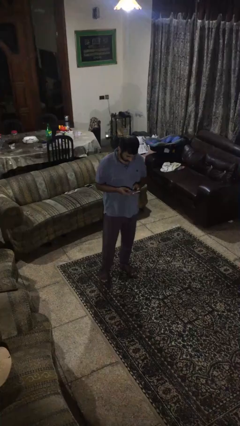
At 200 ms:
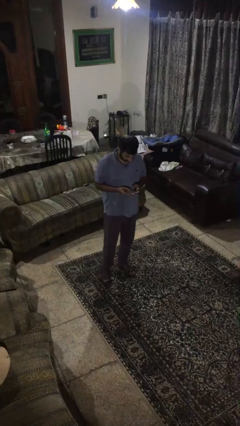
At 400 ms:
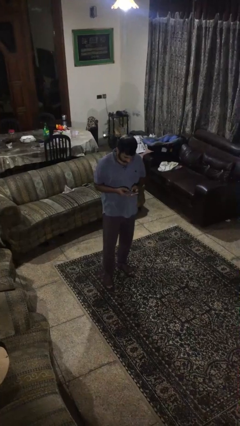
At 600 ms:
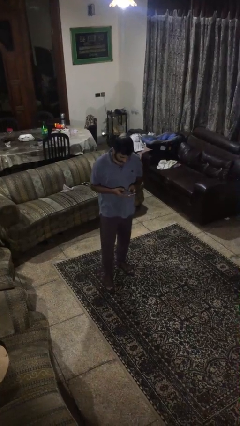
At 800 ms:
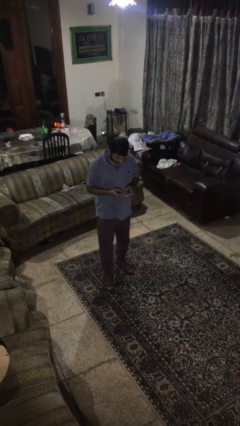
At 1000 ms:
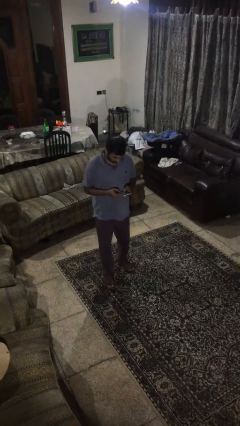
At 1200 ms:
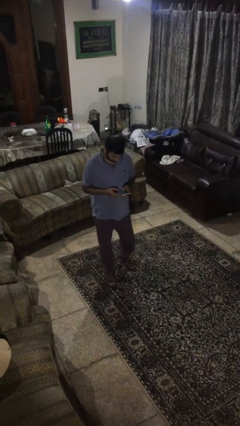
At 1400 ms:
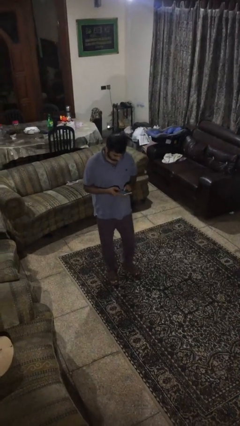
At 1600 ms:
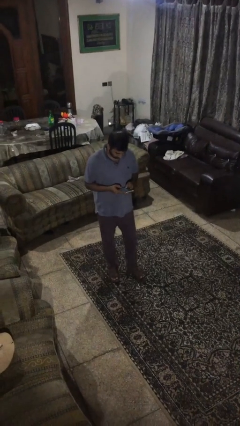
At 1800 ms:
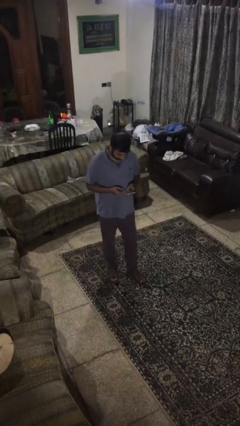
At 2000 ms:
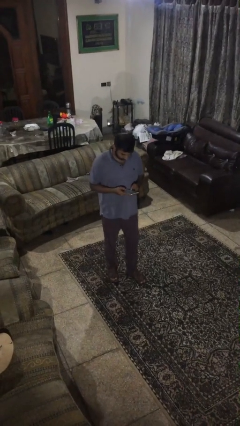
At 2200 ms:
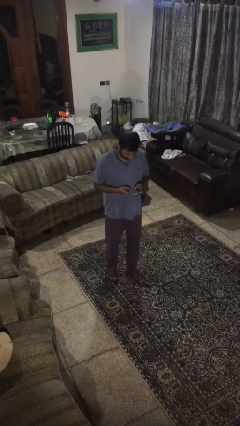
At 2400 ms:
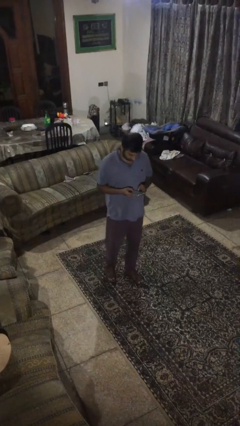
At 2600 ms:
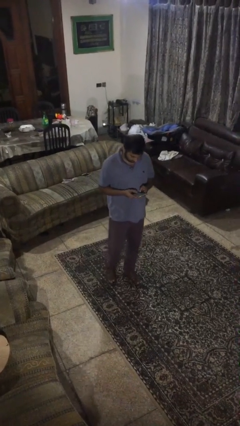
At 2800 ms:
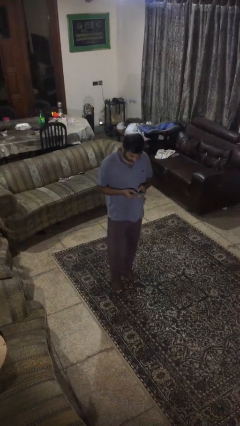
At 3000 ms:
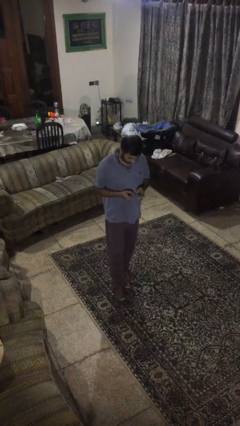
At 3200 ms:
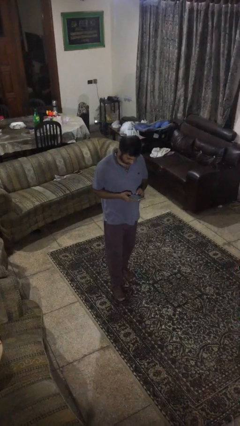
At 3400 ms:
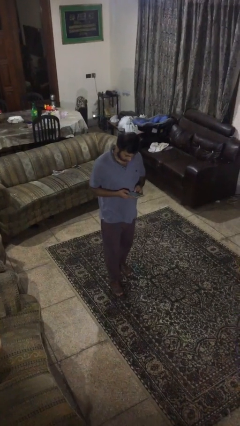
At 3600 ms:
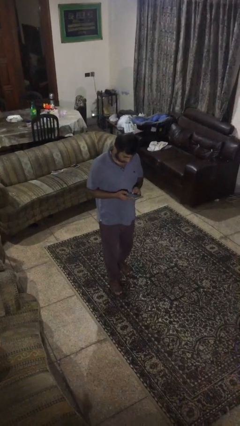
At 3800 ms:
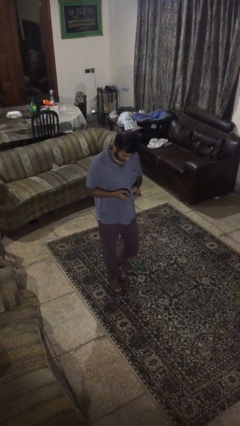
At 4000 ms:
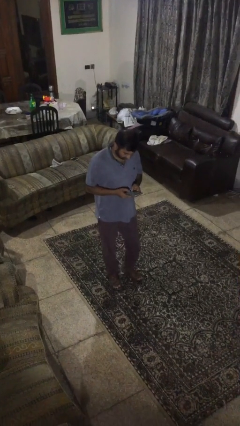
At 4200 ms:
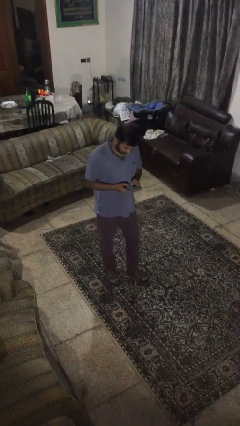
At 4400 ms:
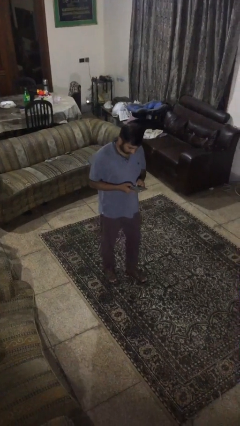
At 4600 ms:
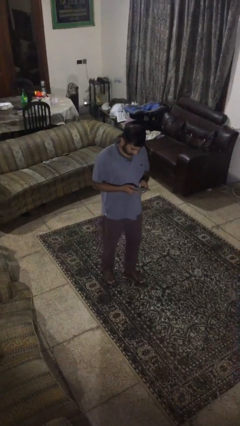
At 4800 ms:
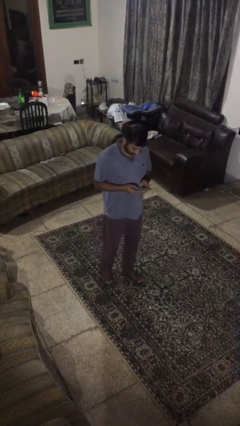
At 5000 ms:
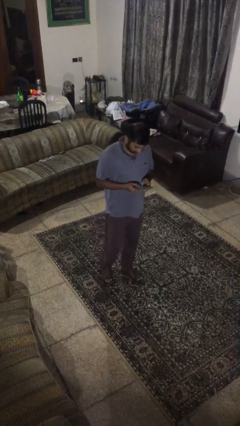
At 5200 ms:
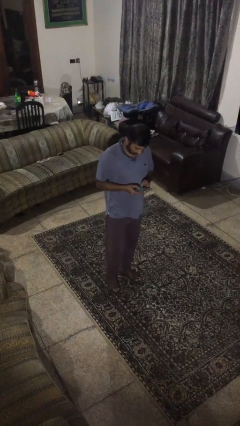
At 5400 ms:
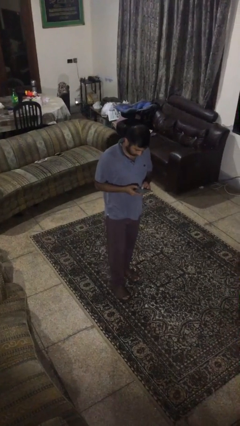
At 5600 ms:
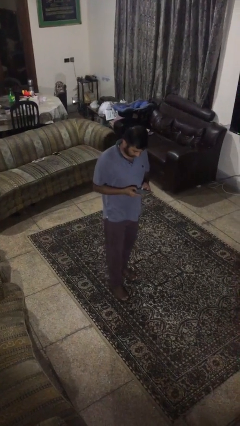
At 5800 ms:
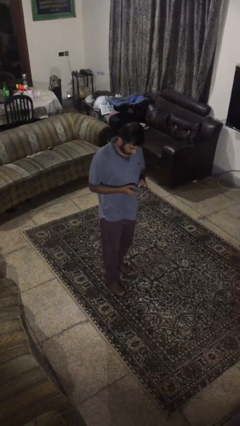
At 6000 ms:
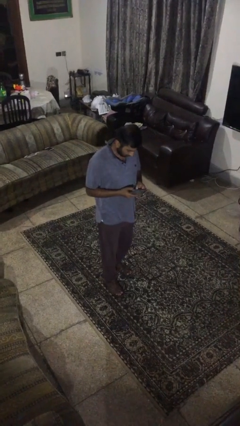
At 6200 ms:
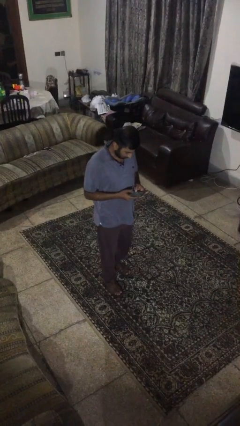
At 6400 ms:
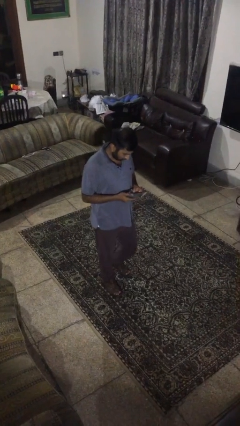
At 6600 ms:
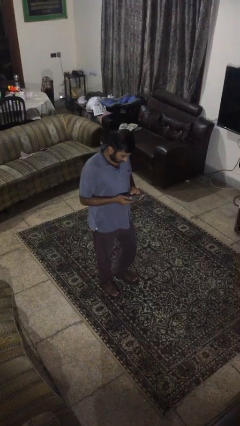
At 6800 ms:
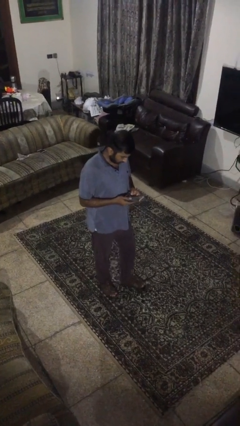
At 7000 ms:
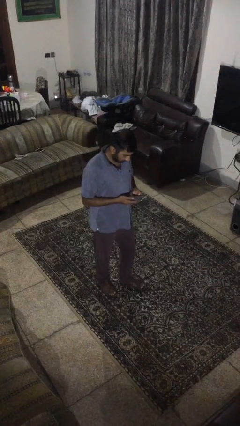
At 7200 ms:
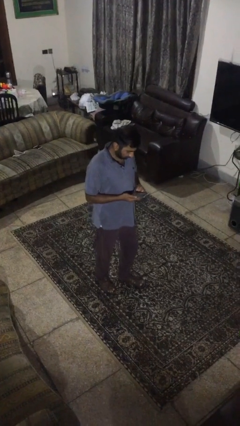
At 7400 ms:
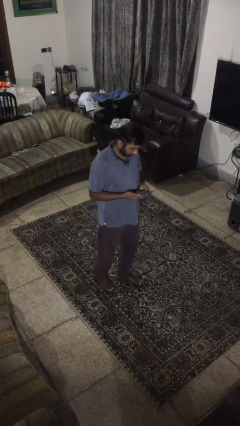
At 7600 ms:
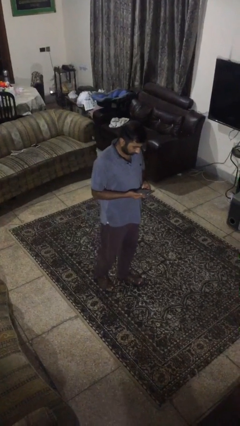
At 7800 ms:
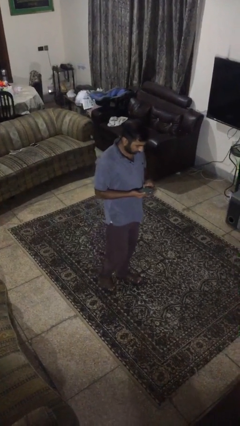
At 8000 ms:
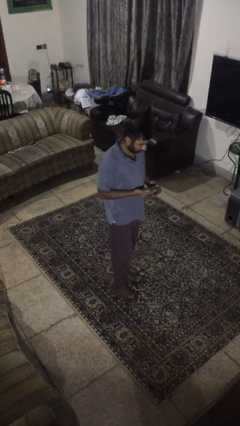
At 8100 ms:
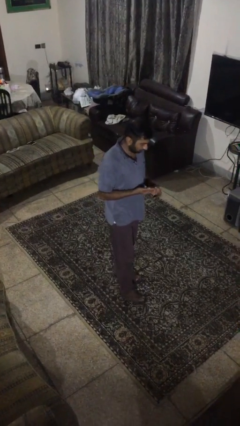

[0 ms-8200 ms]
person texts on phone

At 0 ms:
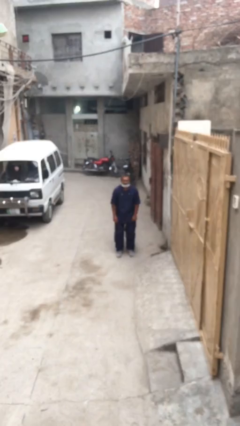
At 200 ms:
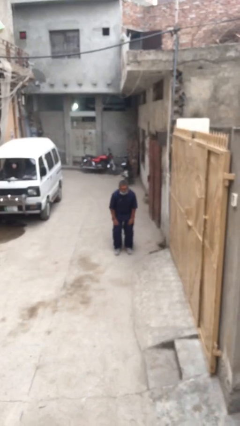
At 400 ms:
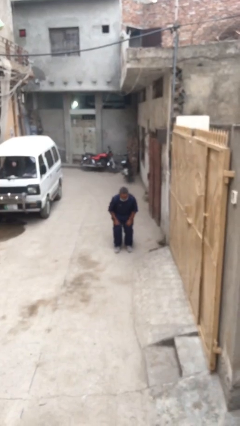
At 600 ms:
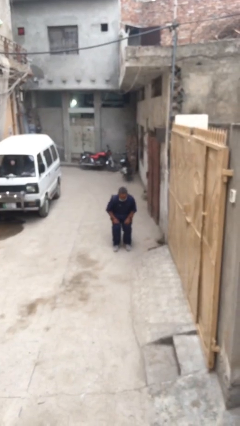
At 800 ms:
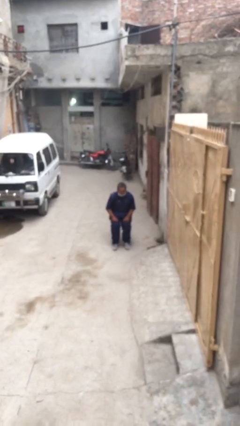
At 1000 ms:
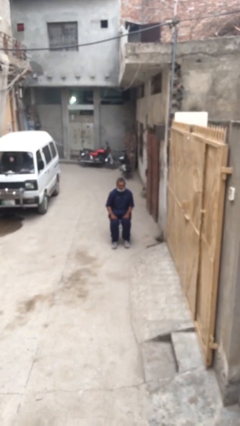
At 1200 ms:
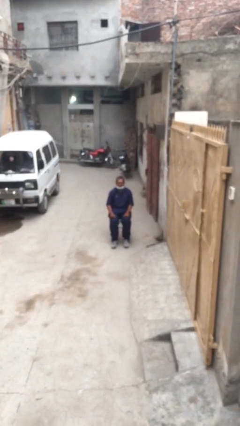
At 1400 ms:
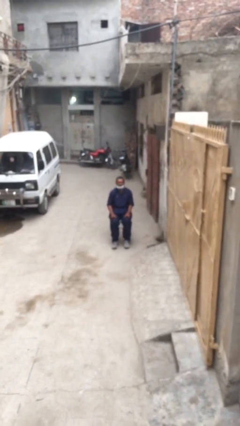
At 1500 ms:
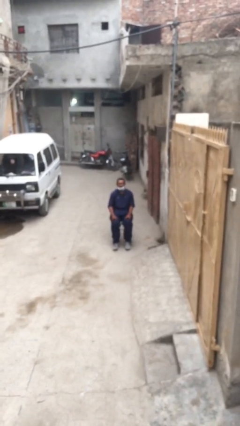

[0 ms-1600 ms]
person sits down

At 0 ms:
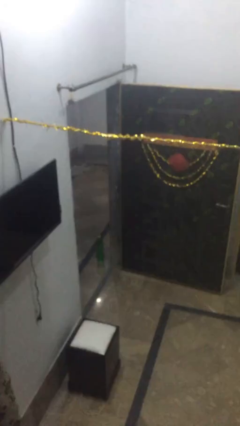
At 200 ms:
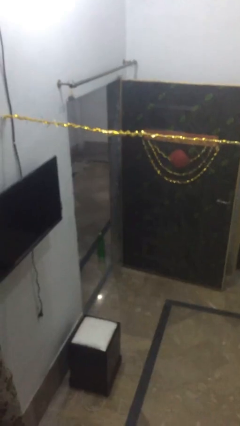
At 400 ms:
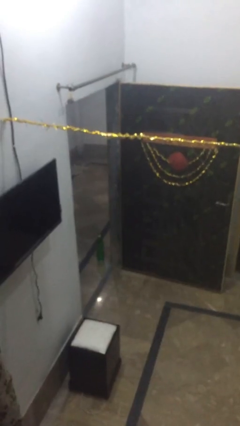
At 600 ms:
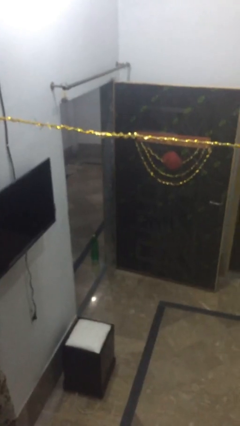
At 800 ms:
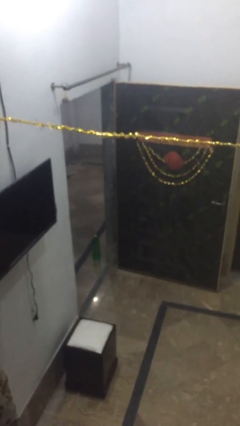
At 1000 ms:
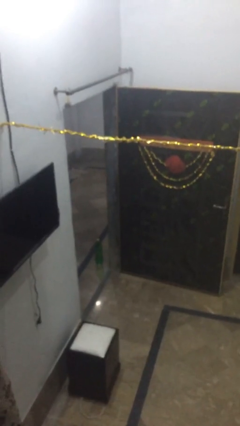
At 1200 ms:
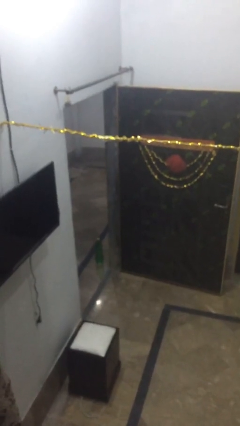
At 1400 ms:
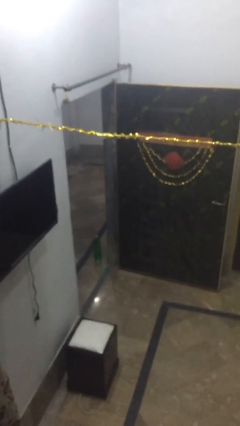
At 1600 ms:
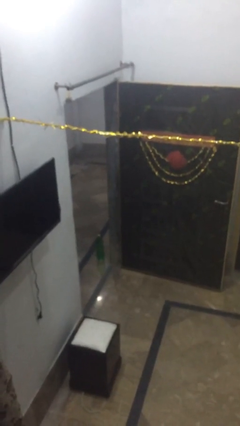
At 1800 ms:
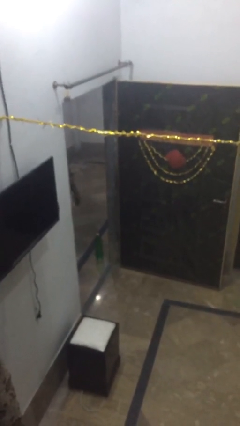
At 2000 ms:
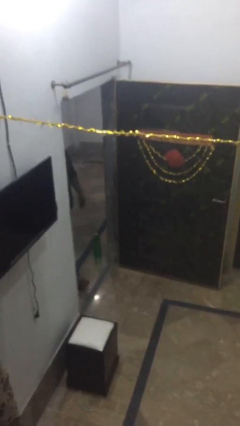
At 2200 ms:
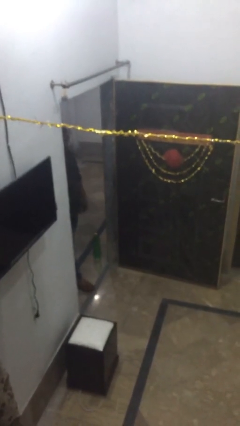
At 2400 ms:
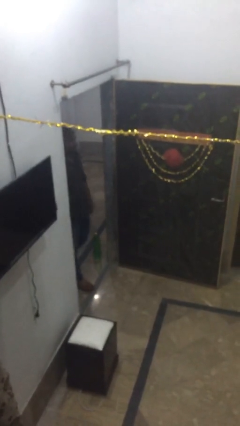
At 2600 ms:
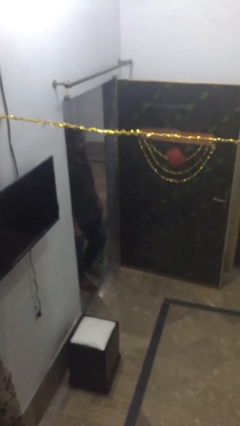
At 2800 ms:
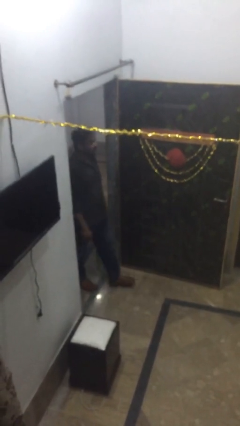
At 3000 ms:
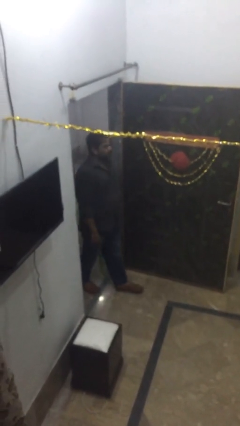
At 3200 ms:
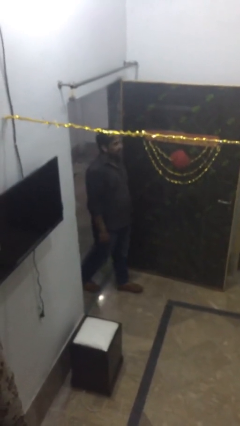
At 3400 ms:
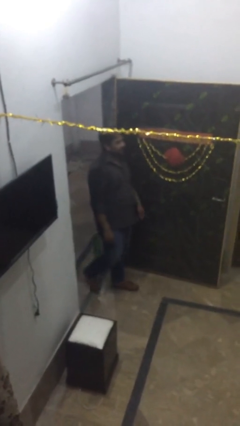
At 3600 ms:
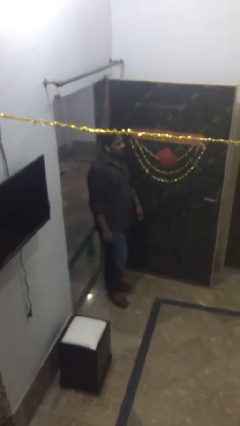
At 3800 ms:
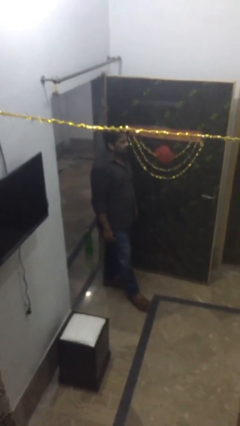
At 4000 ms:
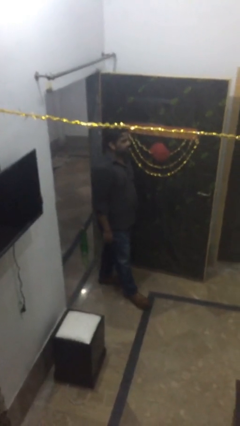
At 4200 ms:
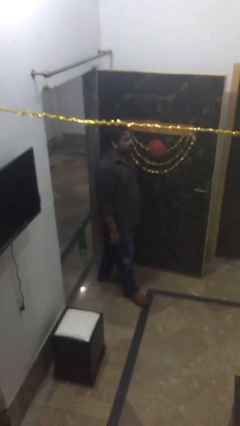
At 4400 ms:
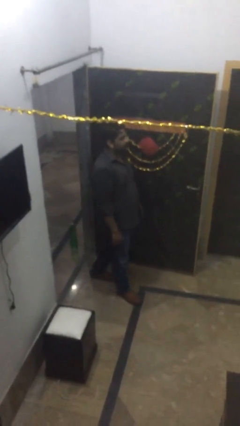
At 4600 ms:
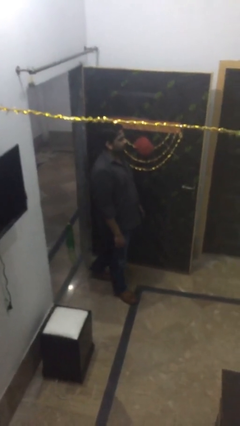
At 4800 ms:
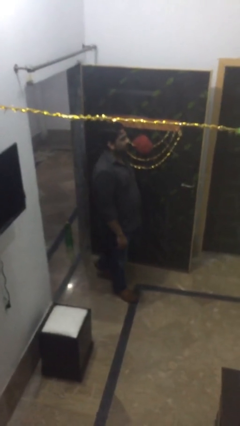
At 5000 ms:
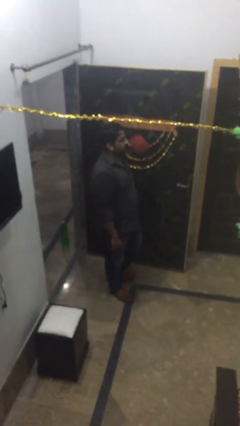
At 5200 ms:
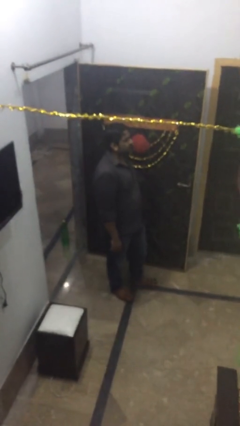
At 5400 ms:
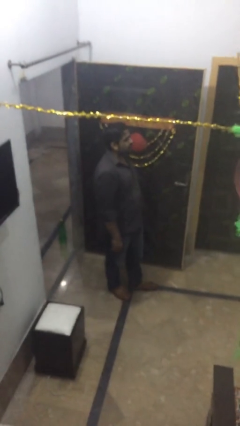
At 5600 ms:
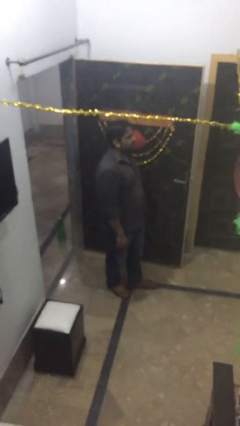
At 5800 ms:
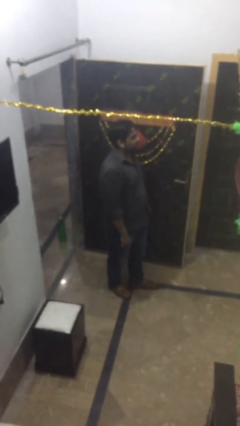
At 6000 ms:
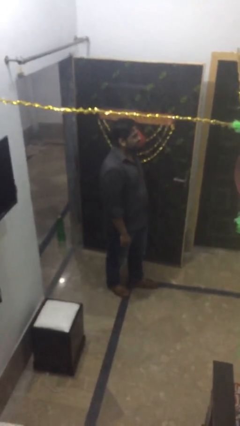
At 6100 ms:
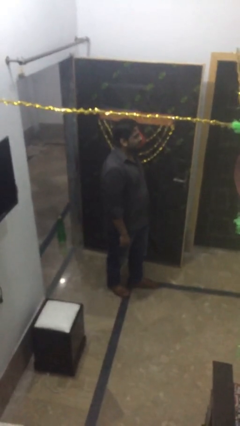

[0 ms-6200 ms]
person enters scene through structure

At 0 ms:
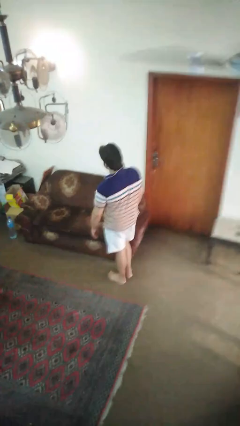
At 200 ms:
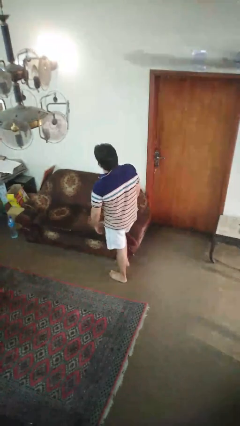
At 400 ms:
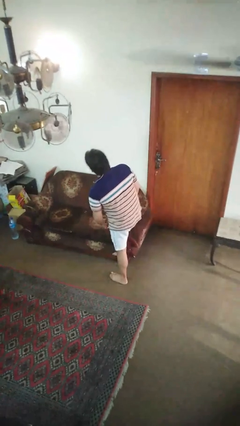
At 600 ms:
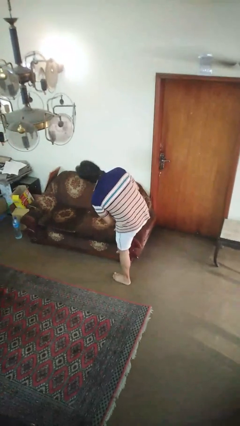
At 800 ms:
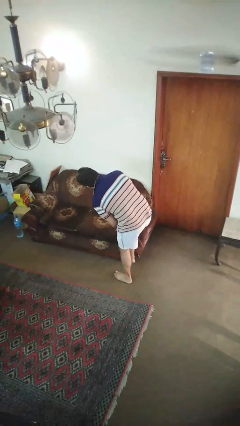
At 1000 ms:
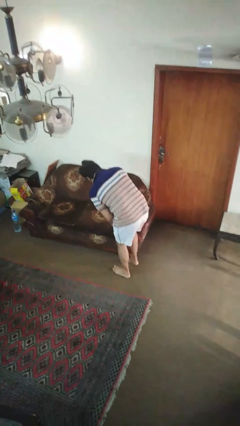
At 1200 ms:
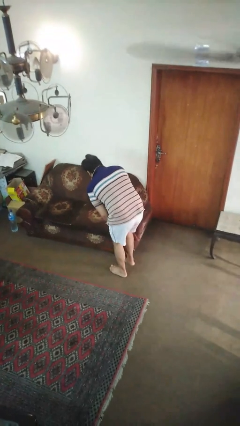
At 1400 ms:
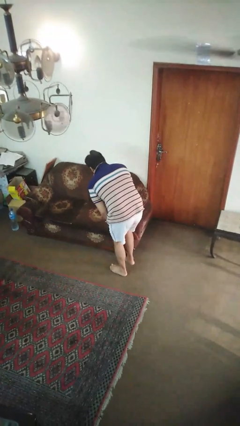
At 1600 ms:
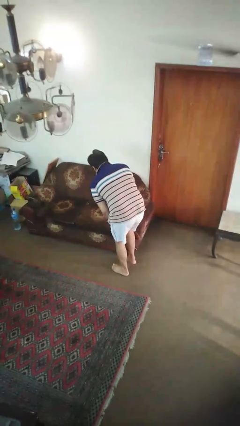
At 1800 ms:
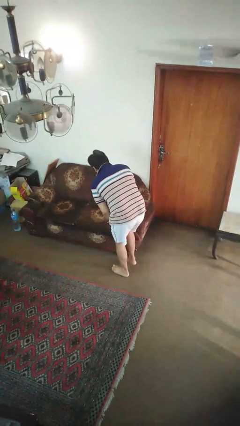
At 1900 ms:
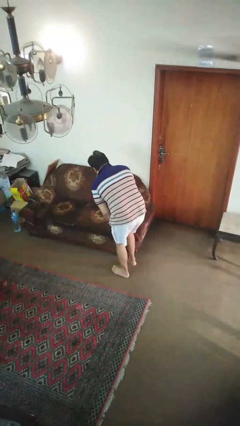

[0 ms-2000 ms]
person stubs toe
